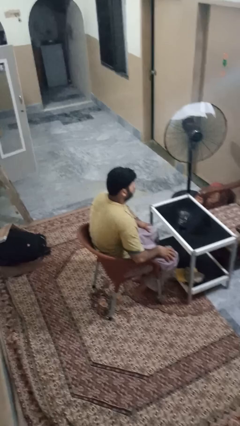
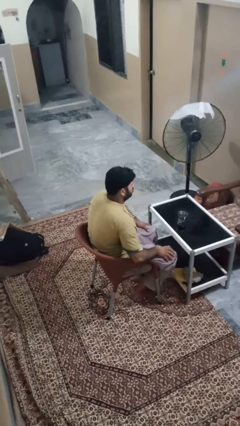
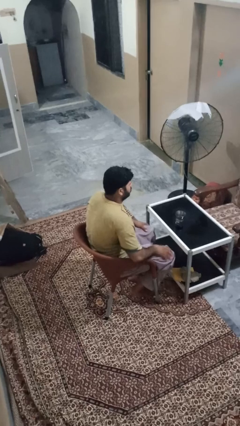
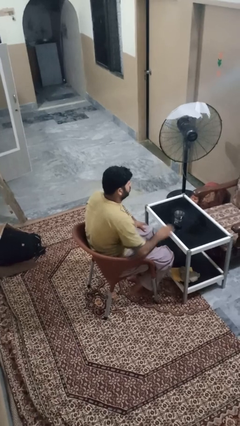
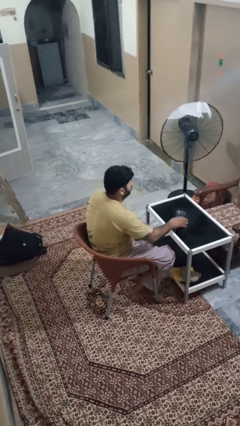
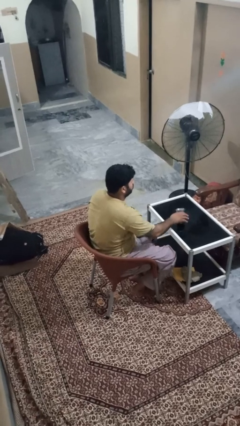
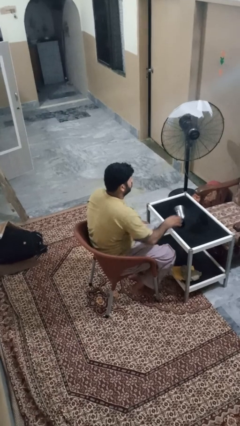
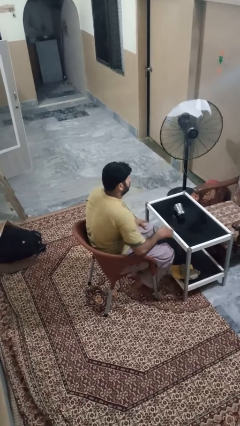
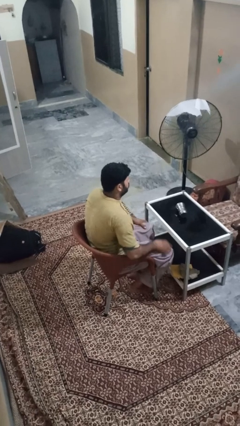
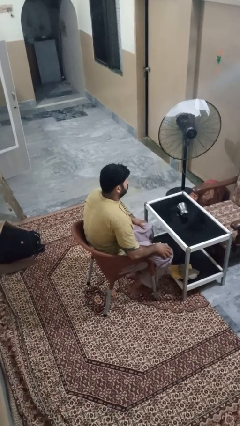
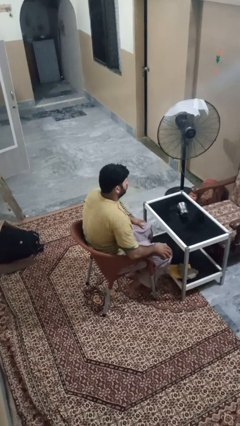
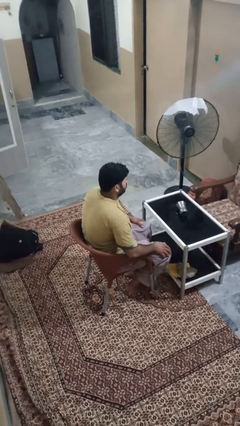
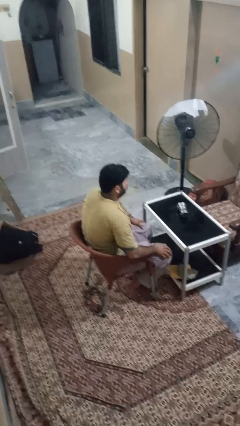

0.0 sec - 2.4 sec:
person knocks over glass

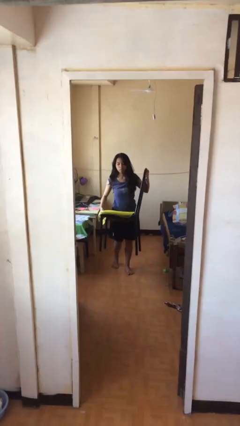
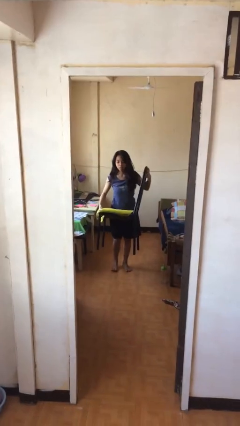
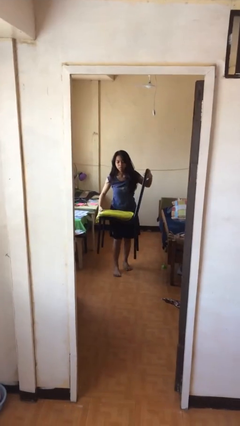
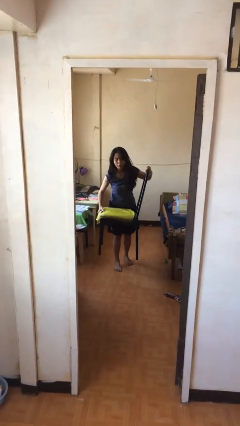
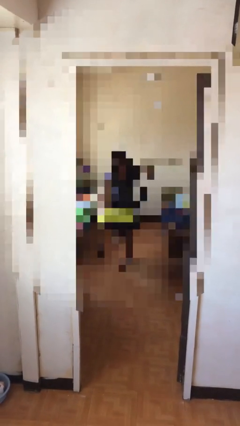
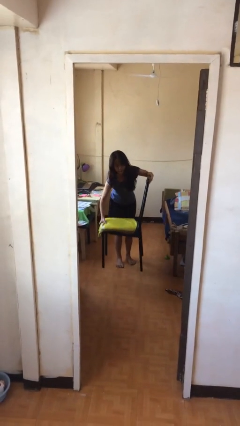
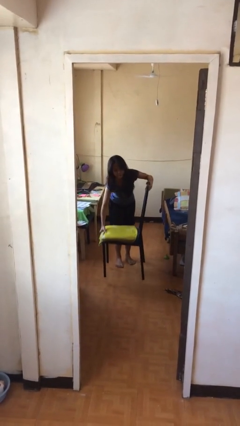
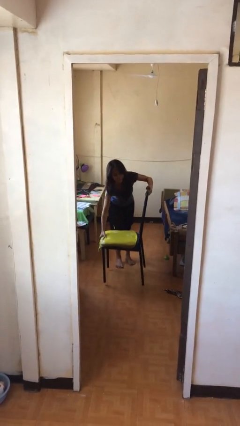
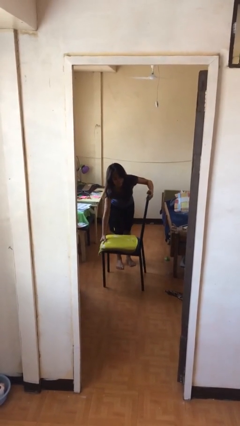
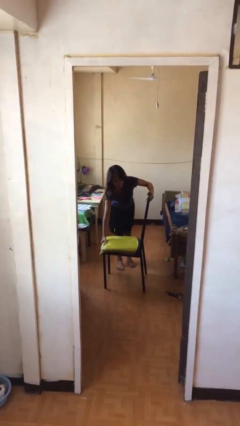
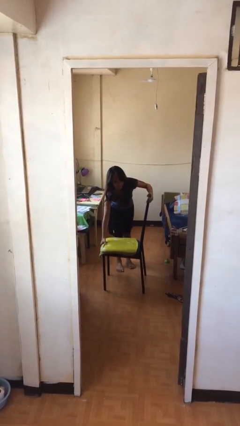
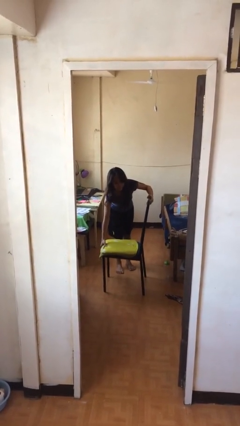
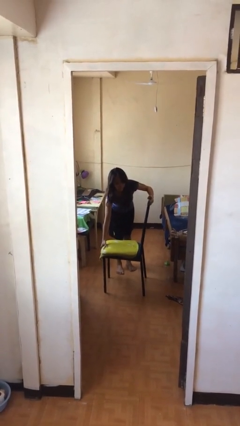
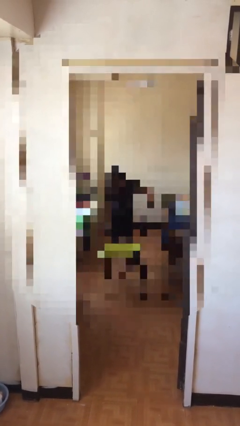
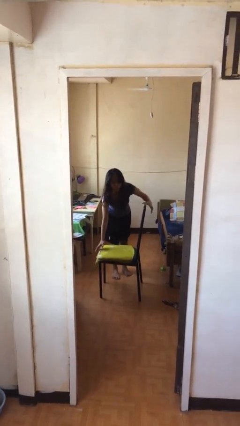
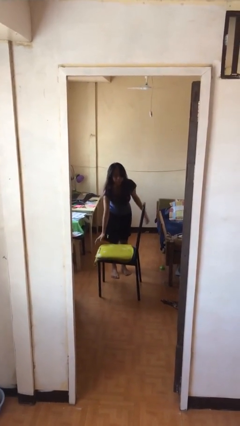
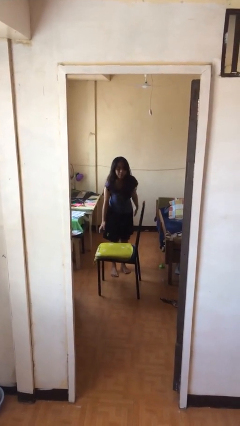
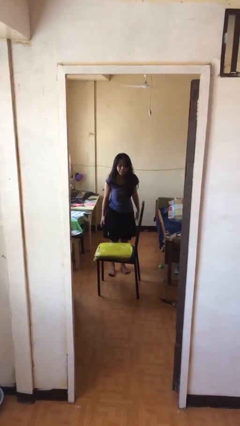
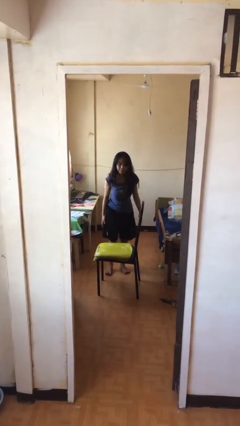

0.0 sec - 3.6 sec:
person puts down object on floor

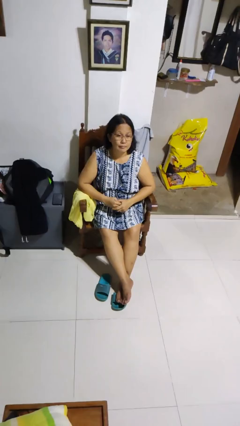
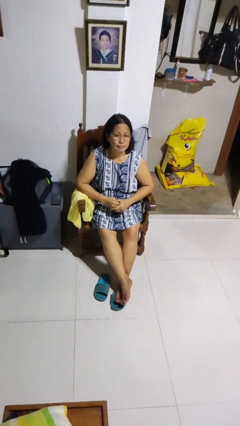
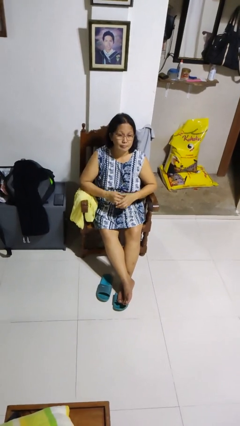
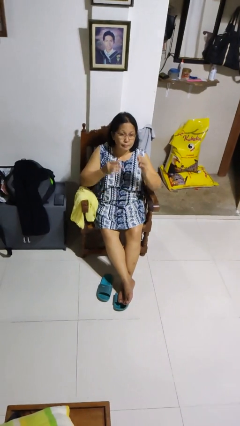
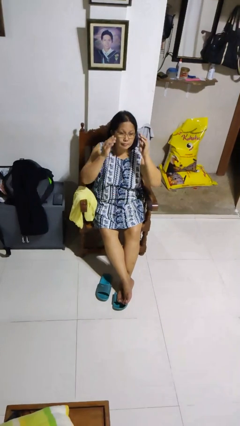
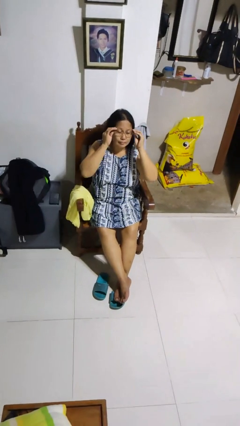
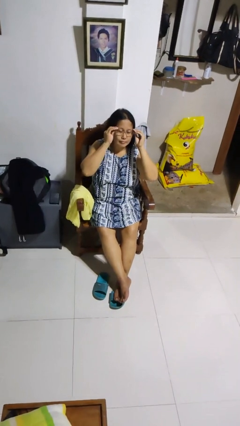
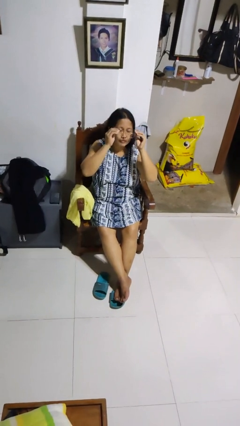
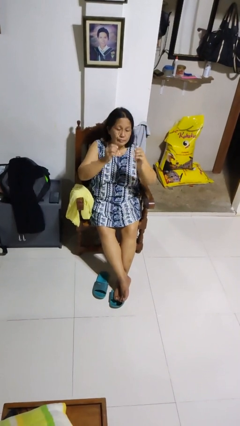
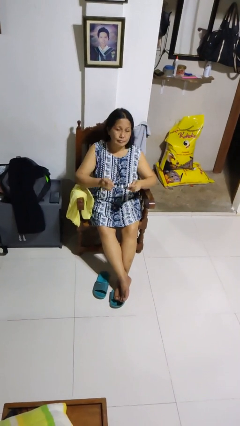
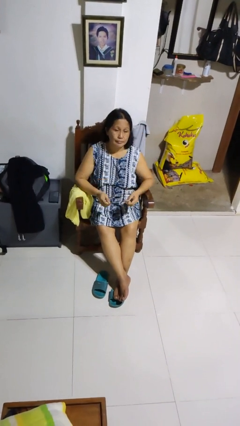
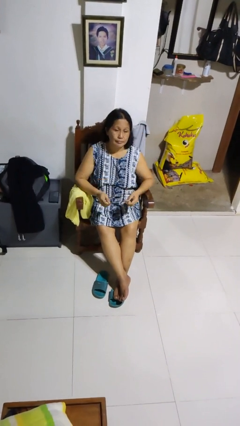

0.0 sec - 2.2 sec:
person takes off glasses

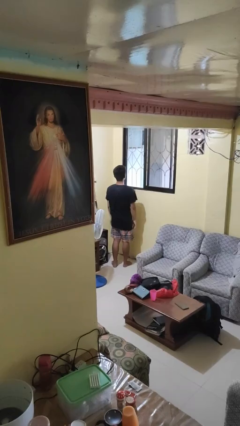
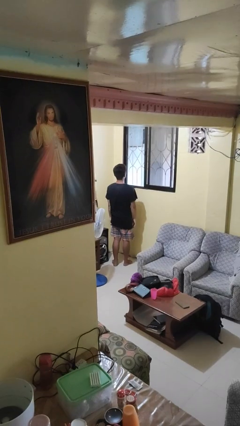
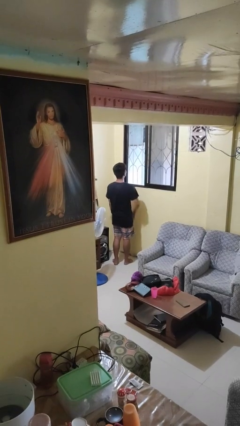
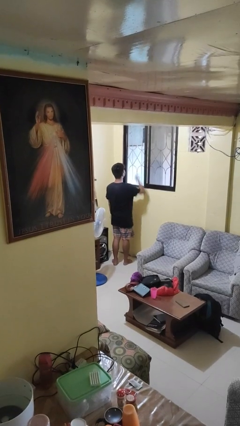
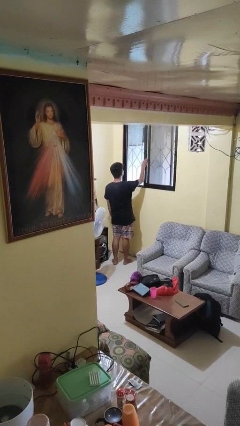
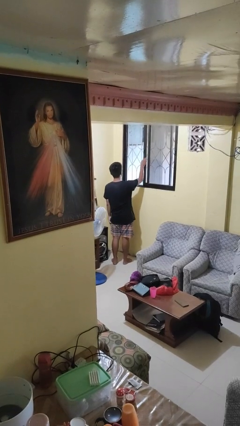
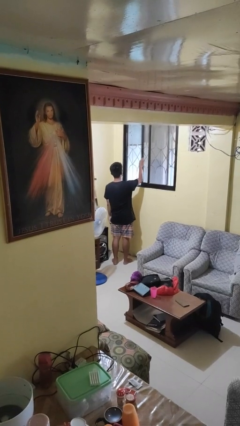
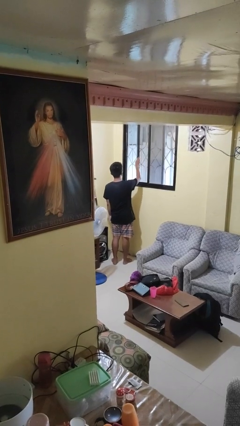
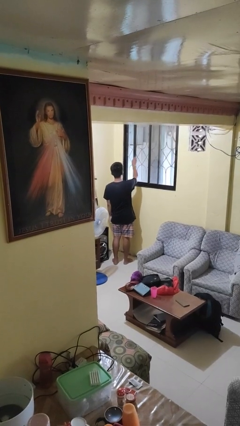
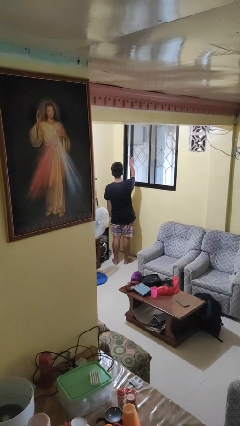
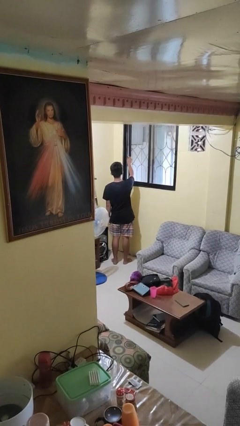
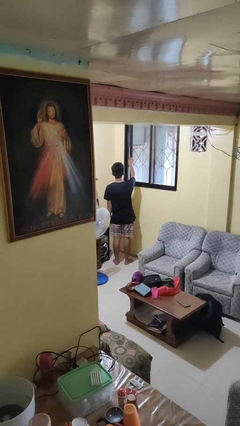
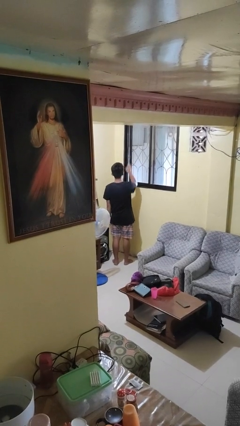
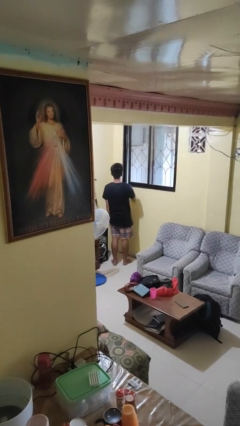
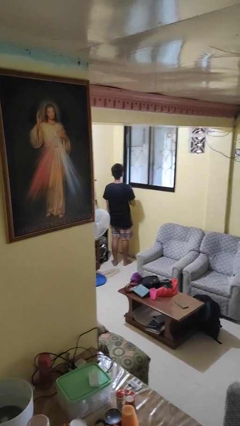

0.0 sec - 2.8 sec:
person closes home window

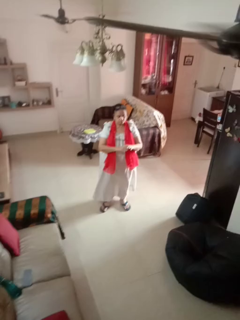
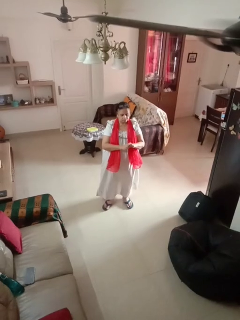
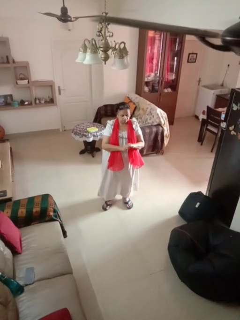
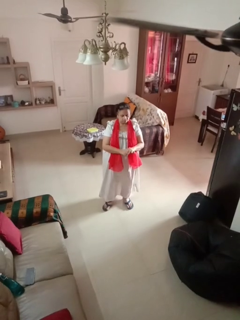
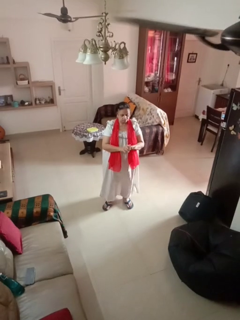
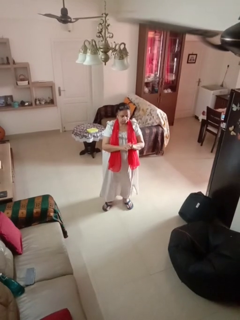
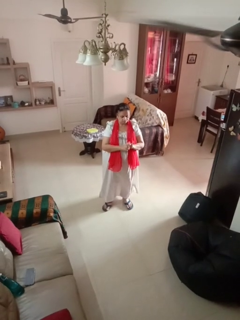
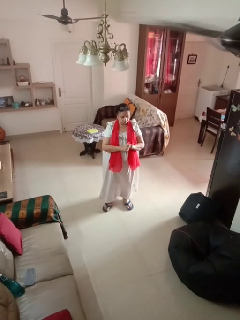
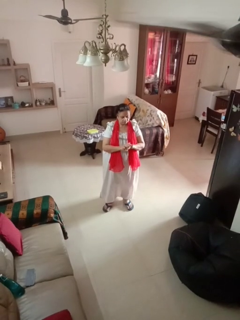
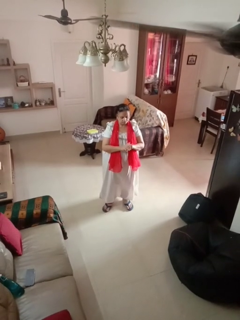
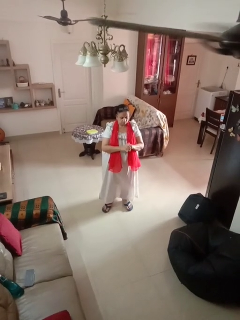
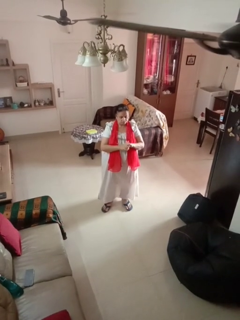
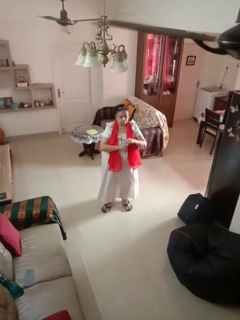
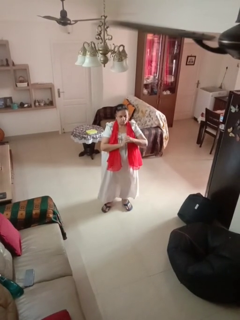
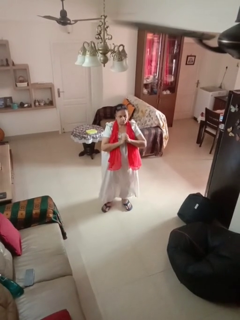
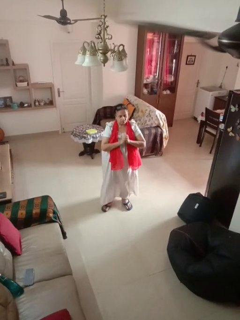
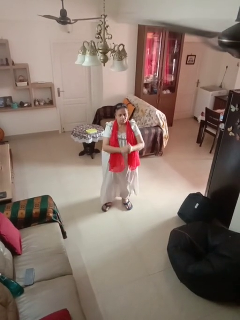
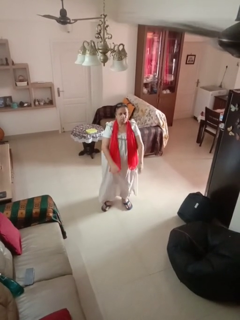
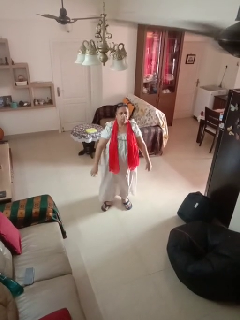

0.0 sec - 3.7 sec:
person cracks knuckles

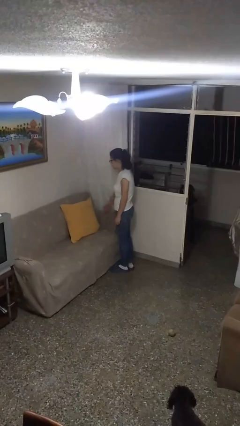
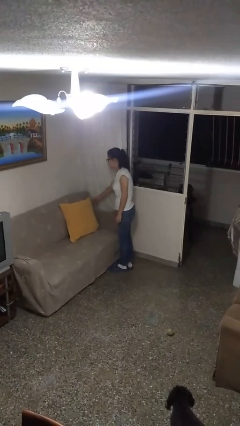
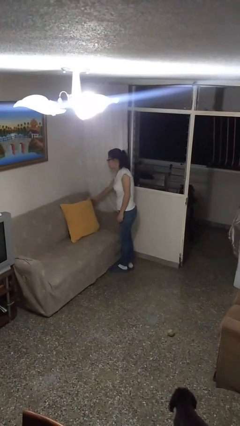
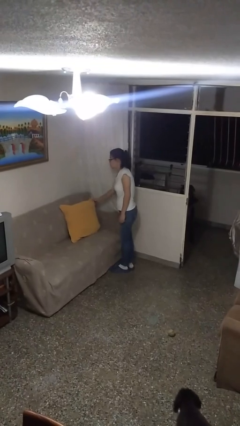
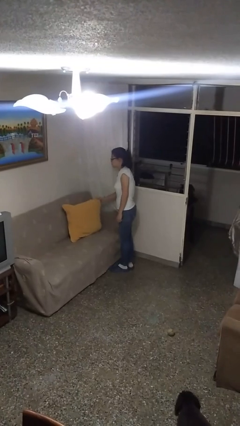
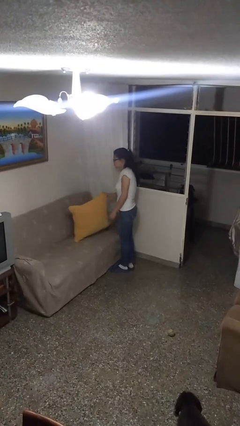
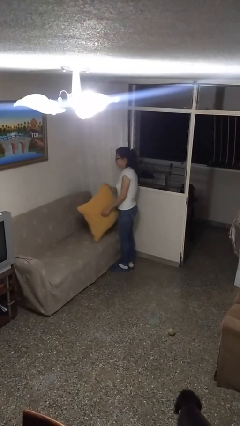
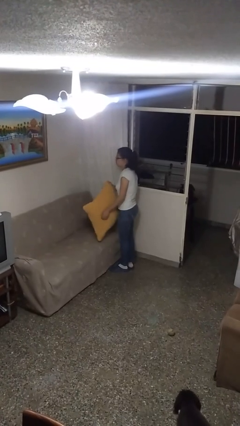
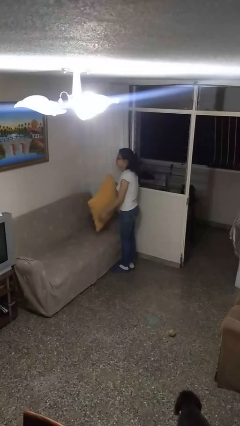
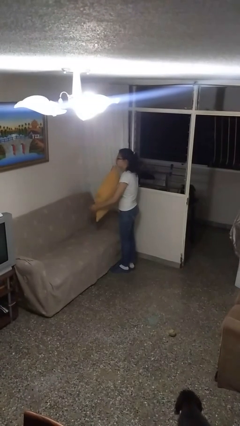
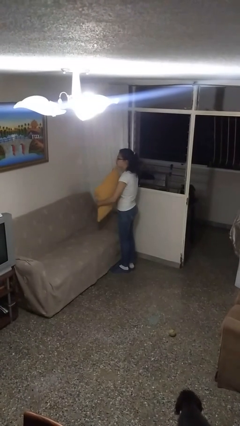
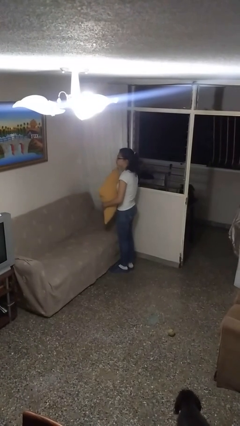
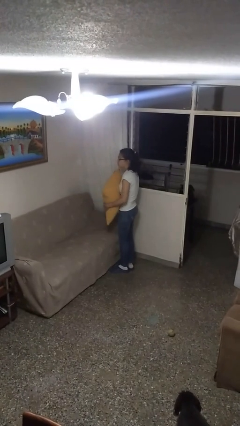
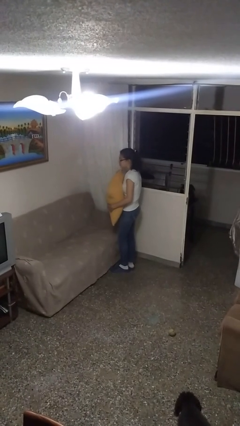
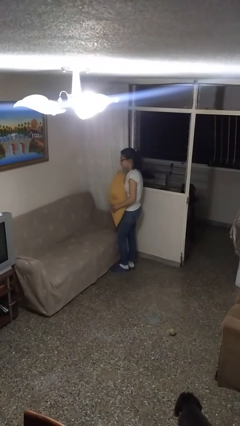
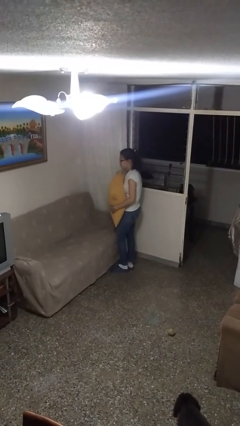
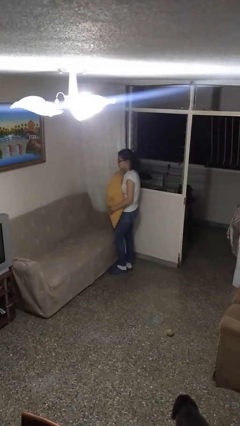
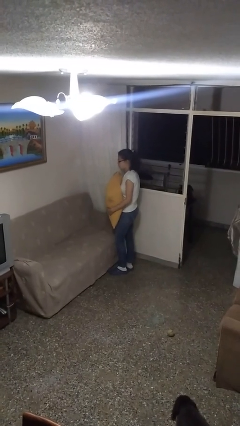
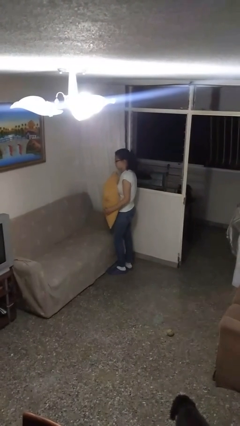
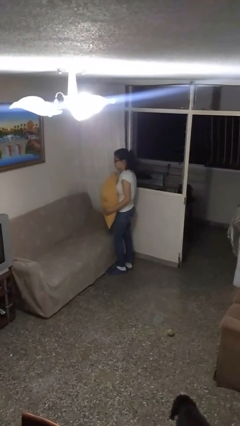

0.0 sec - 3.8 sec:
person picks up object from couch
